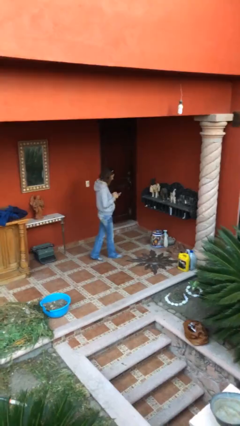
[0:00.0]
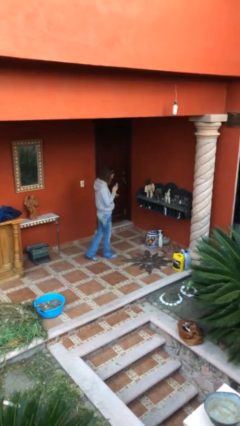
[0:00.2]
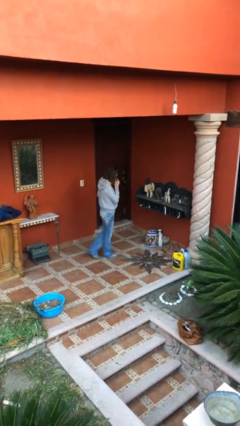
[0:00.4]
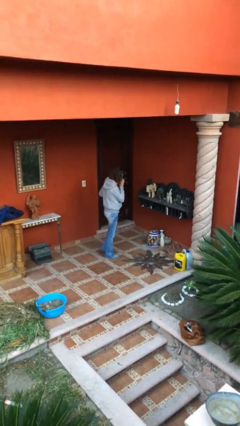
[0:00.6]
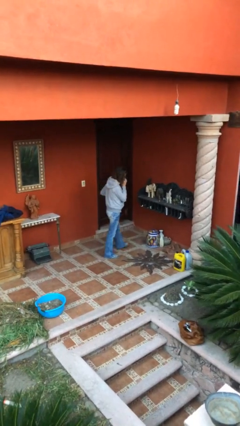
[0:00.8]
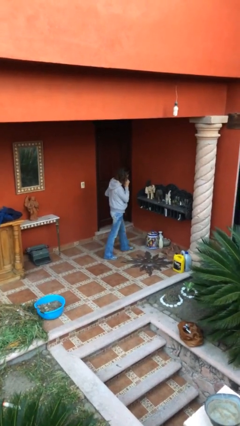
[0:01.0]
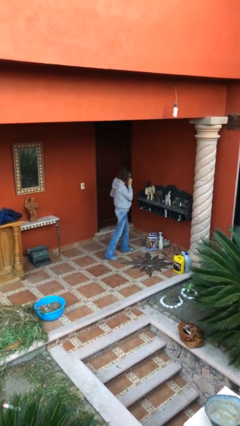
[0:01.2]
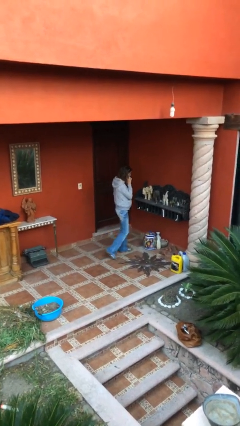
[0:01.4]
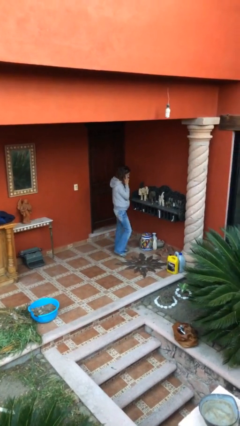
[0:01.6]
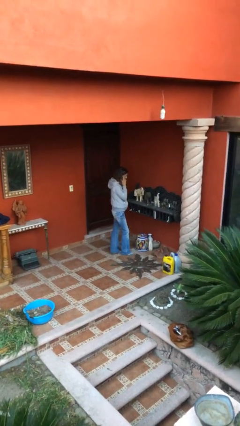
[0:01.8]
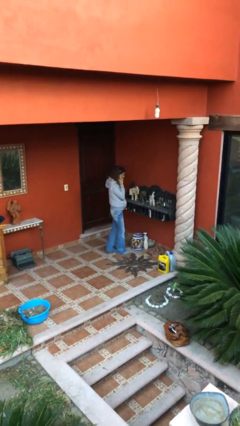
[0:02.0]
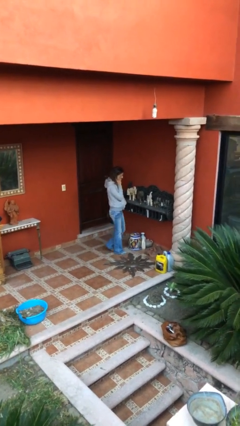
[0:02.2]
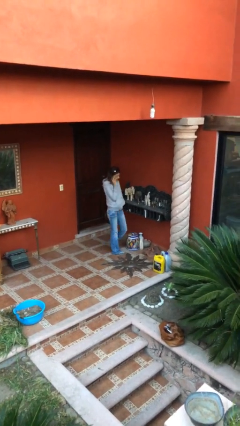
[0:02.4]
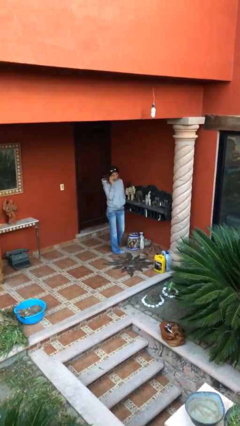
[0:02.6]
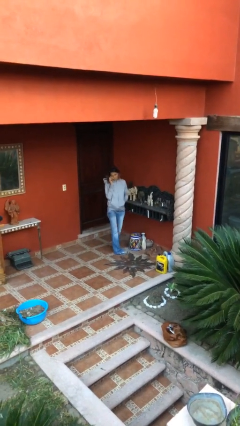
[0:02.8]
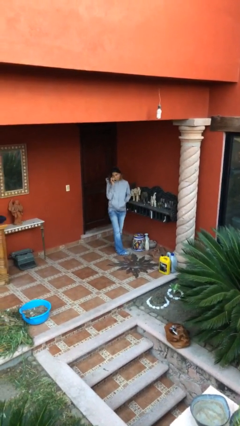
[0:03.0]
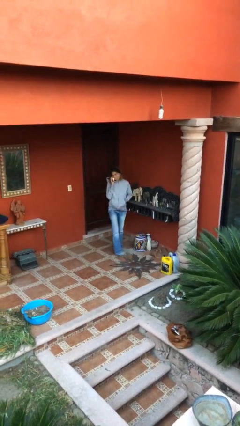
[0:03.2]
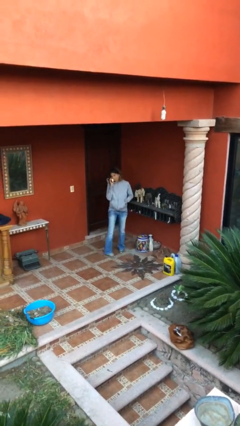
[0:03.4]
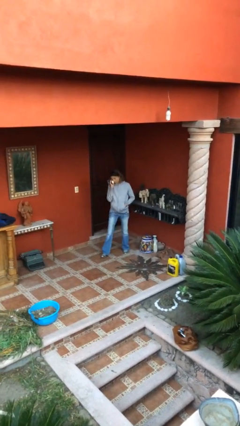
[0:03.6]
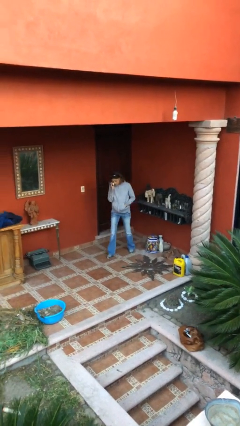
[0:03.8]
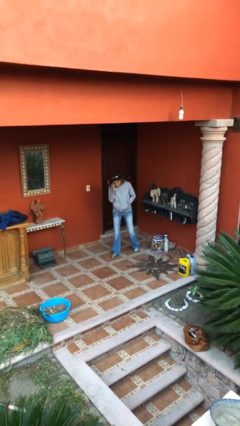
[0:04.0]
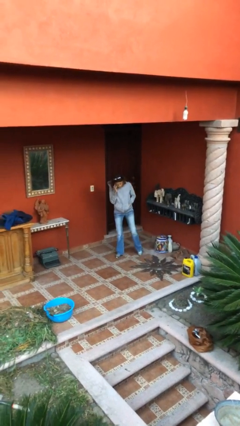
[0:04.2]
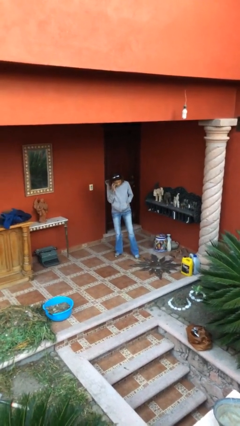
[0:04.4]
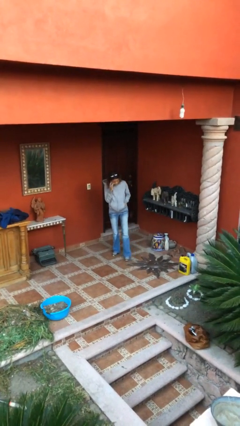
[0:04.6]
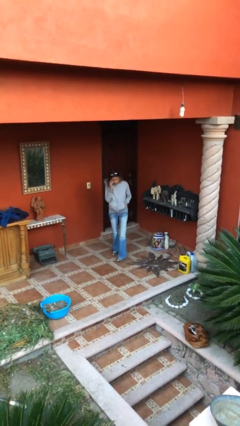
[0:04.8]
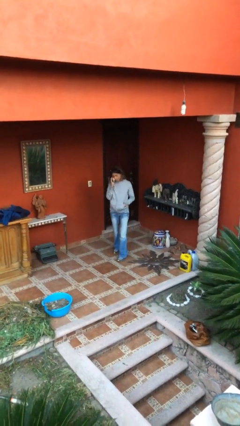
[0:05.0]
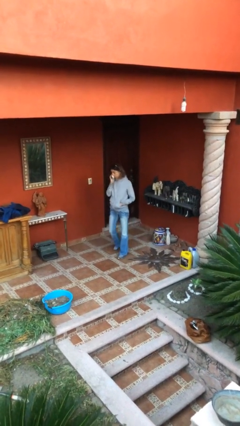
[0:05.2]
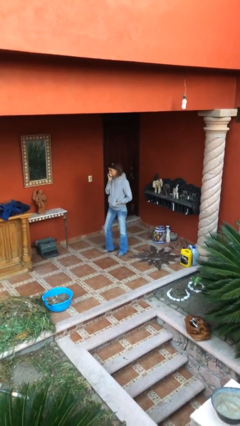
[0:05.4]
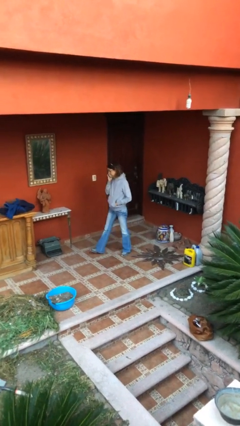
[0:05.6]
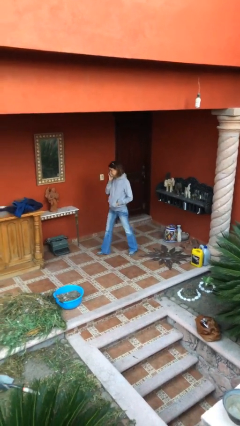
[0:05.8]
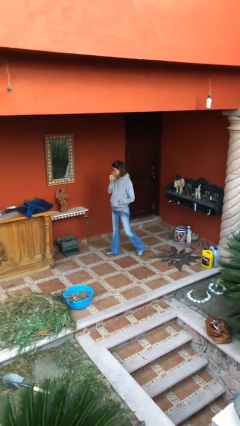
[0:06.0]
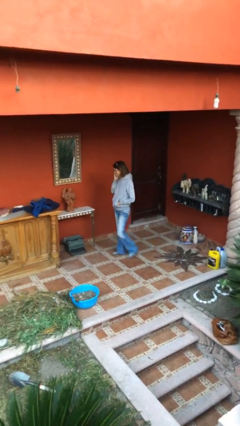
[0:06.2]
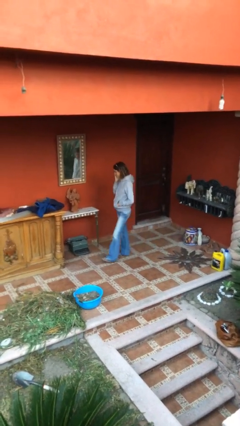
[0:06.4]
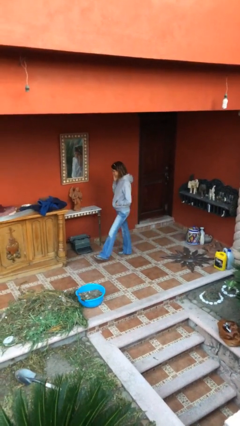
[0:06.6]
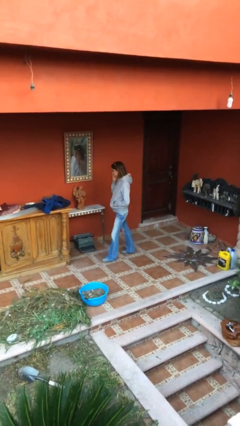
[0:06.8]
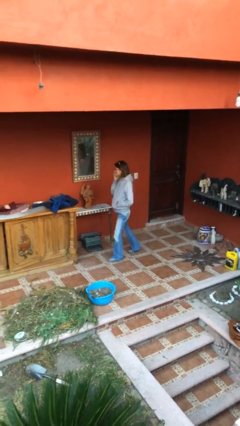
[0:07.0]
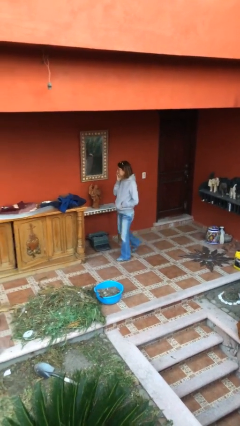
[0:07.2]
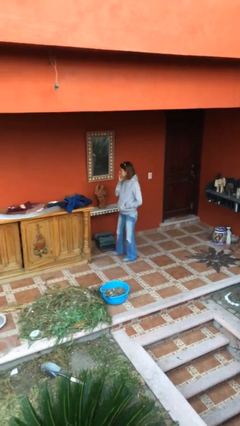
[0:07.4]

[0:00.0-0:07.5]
person talks on phone

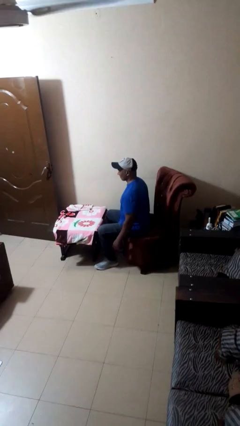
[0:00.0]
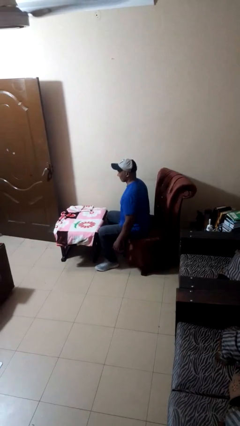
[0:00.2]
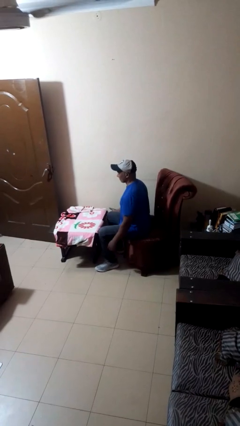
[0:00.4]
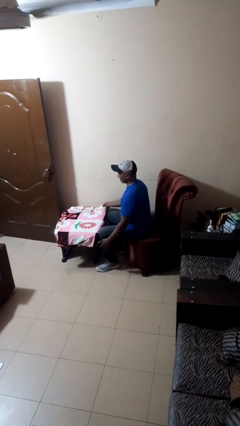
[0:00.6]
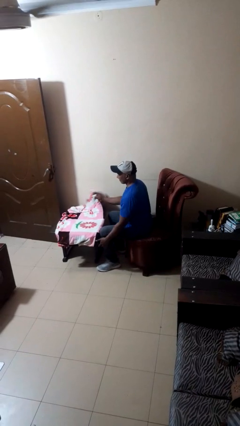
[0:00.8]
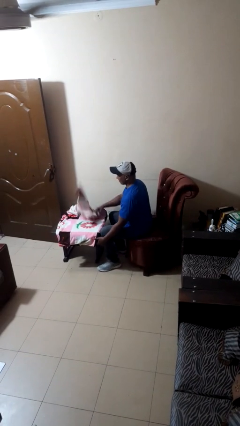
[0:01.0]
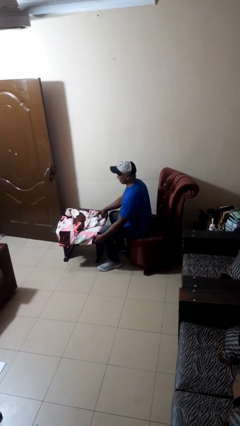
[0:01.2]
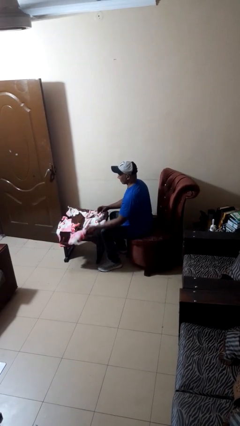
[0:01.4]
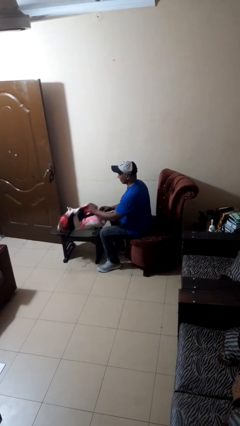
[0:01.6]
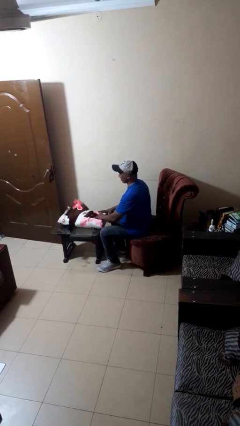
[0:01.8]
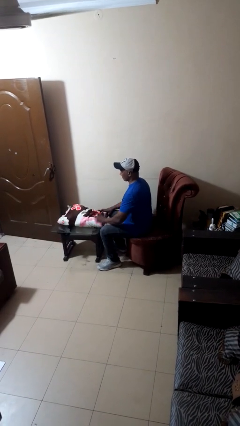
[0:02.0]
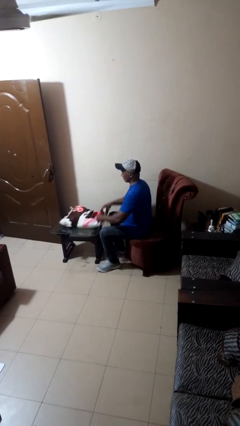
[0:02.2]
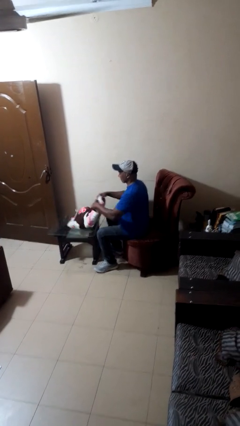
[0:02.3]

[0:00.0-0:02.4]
person folds blanket

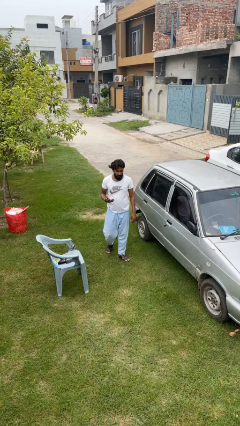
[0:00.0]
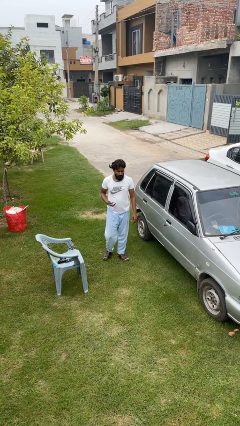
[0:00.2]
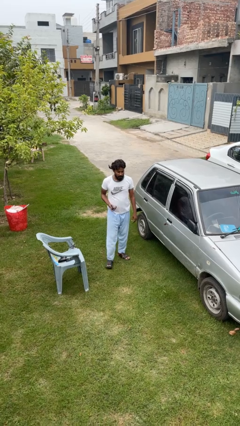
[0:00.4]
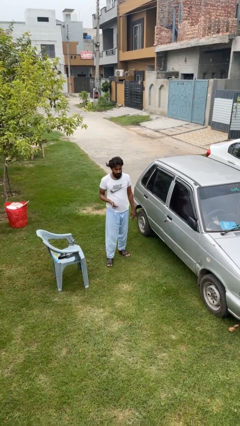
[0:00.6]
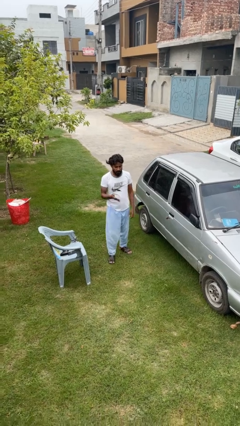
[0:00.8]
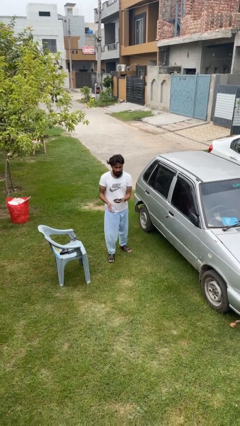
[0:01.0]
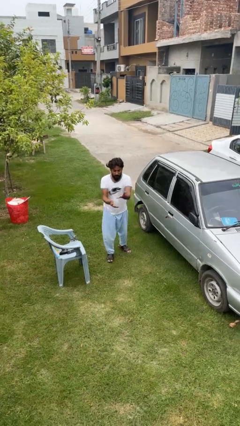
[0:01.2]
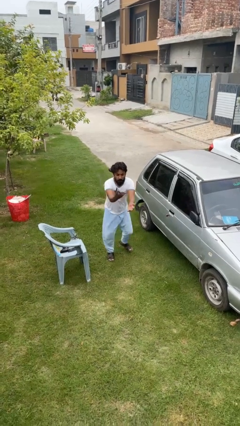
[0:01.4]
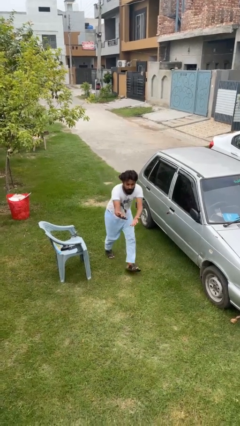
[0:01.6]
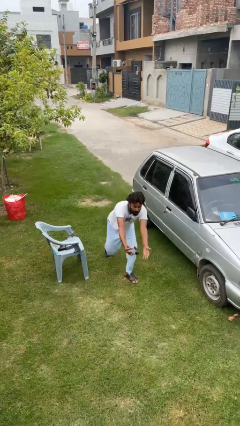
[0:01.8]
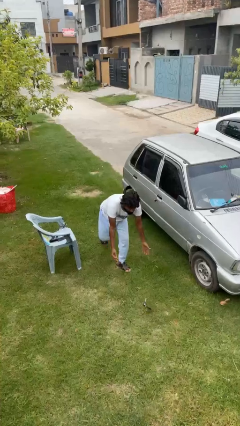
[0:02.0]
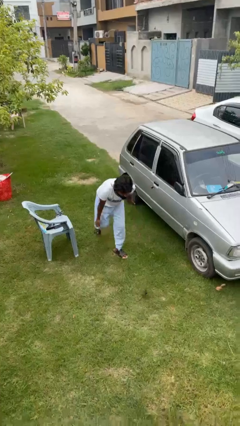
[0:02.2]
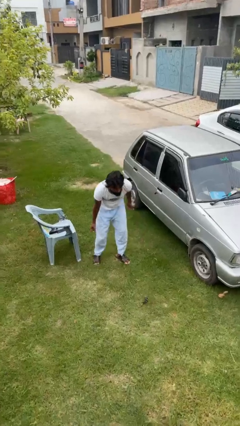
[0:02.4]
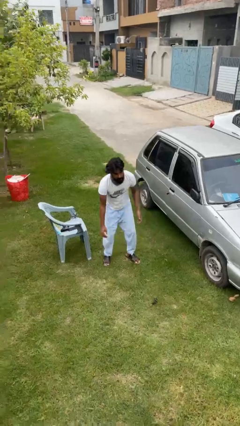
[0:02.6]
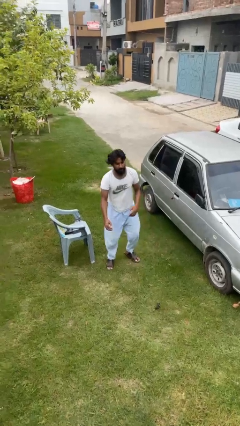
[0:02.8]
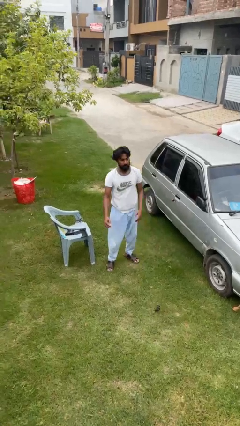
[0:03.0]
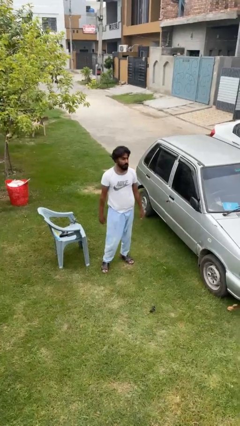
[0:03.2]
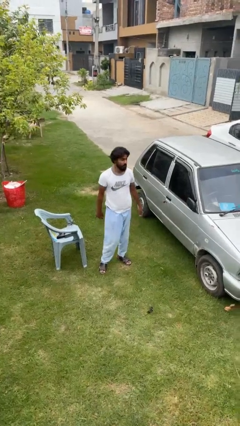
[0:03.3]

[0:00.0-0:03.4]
person drops object

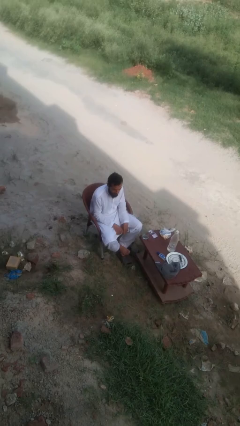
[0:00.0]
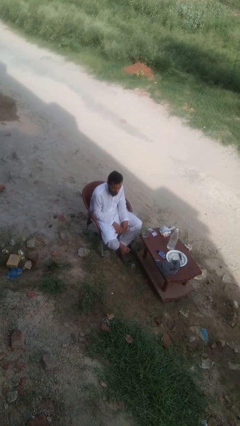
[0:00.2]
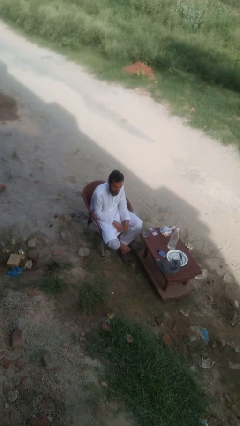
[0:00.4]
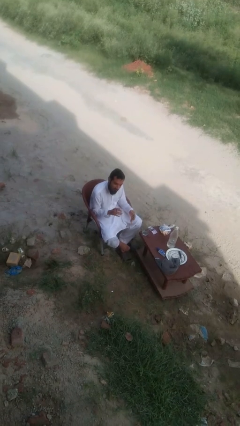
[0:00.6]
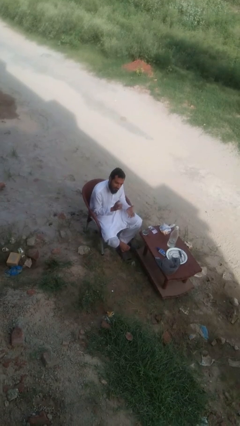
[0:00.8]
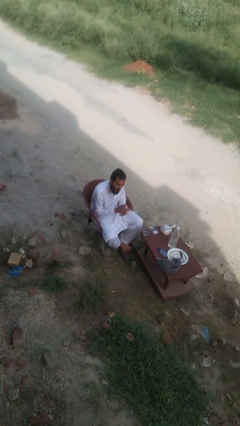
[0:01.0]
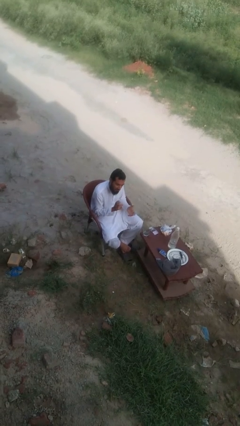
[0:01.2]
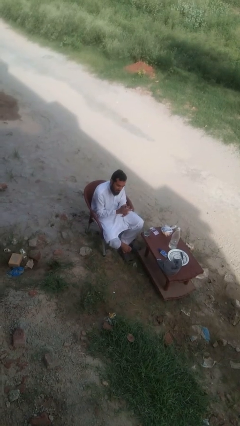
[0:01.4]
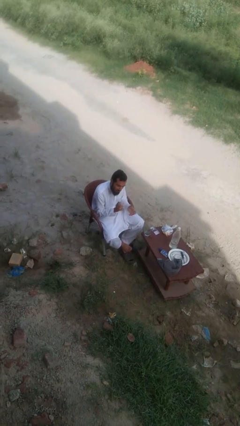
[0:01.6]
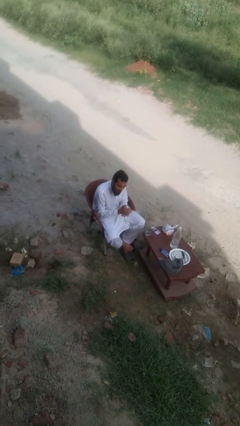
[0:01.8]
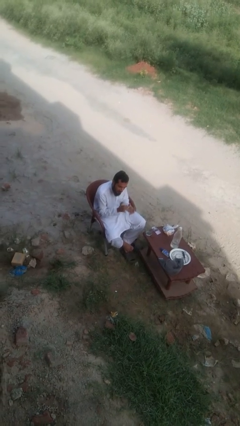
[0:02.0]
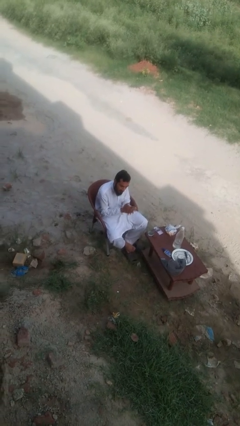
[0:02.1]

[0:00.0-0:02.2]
person claps hands

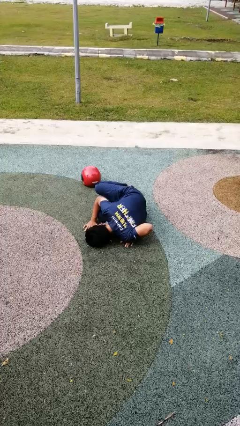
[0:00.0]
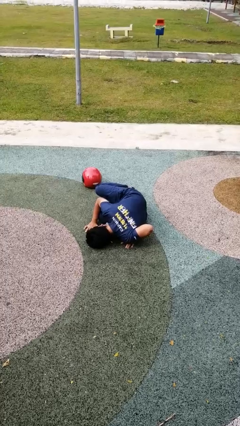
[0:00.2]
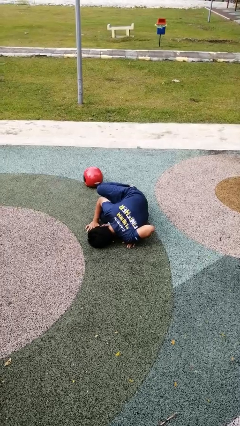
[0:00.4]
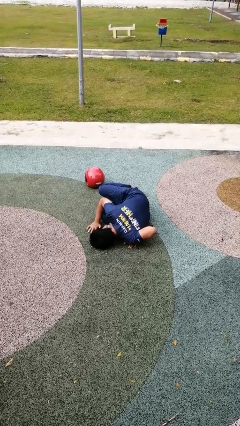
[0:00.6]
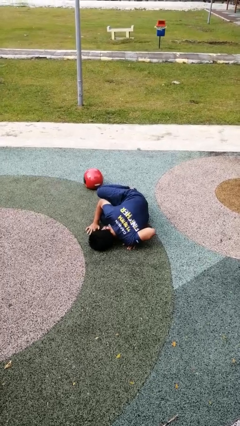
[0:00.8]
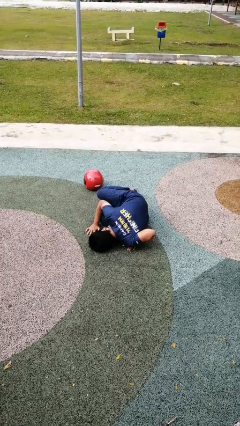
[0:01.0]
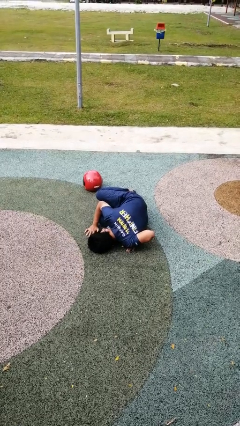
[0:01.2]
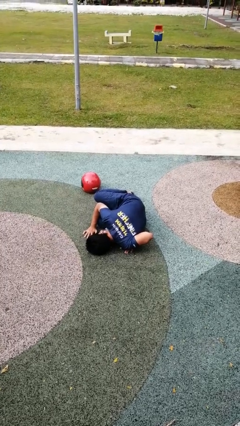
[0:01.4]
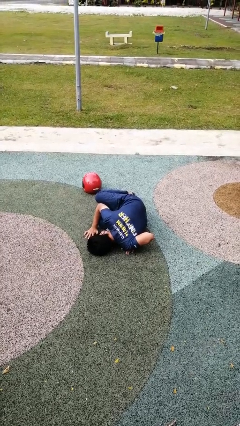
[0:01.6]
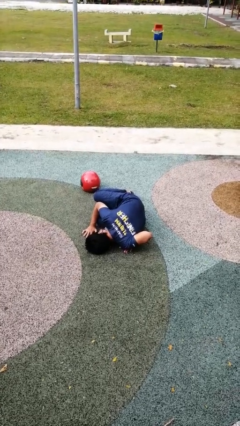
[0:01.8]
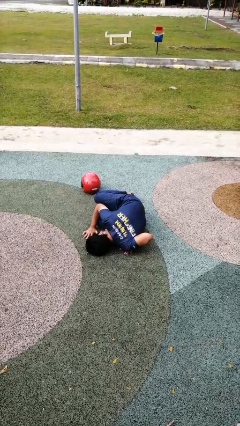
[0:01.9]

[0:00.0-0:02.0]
person lies down on floor

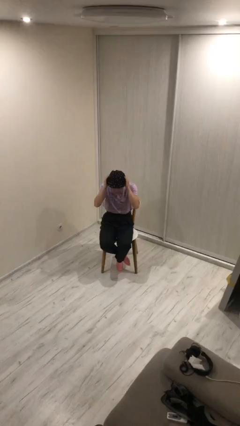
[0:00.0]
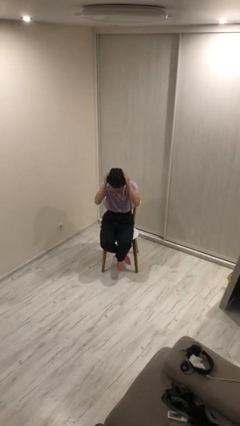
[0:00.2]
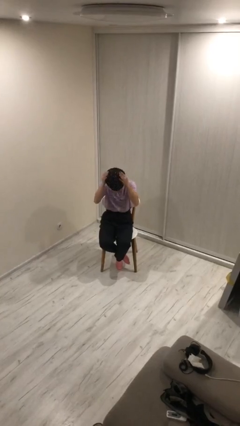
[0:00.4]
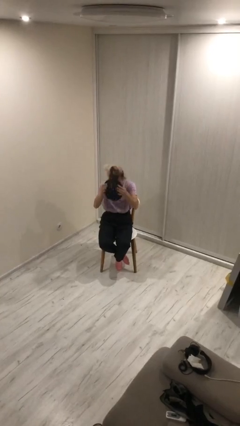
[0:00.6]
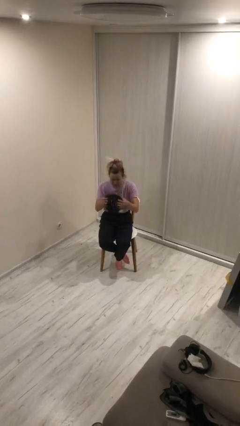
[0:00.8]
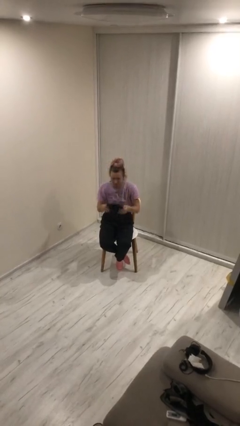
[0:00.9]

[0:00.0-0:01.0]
person takes off hat
